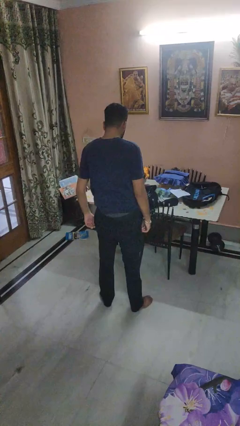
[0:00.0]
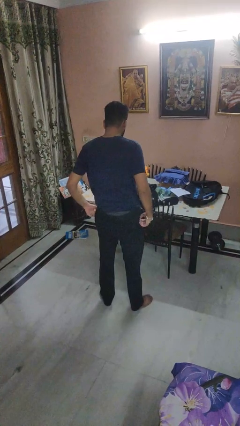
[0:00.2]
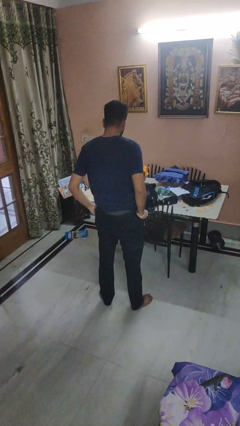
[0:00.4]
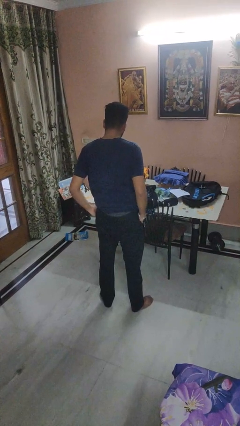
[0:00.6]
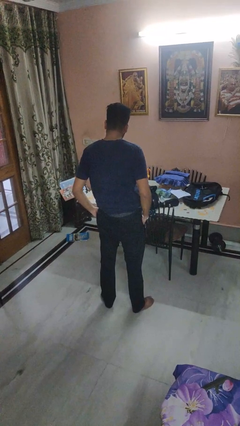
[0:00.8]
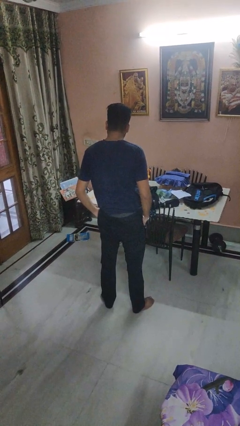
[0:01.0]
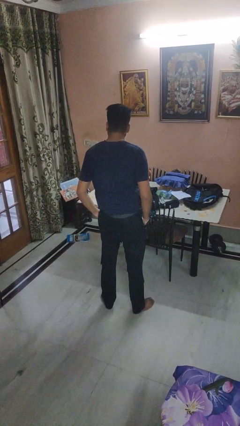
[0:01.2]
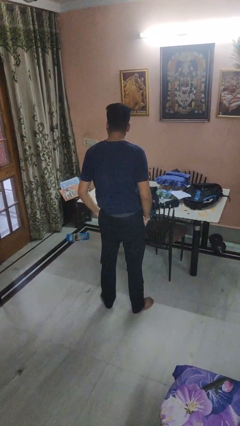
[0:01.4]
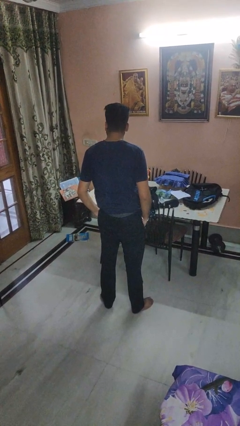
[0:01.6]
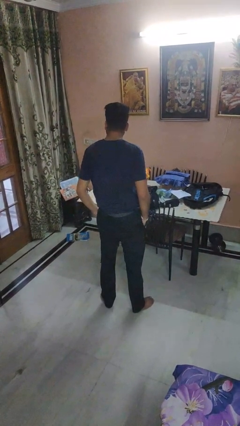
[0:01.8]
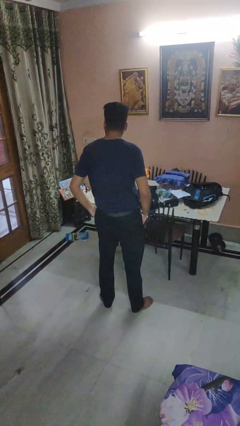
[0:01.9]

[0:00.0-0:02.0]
person puts hands in back pockets

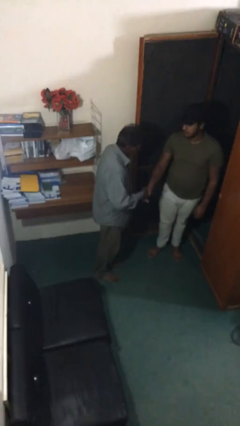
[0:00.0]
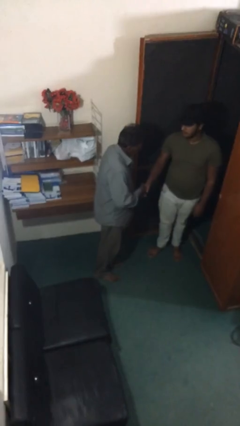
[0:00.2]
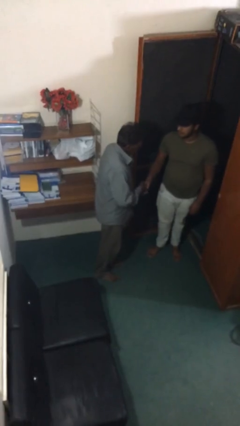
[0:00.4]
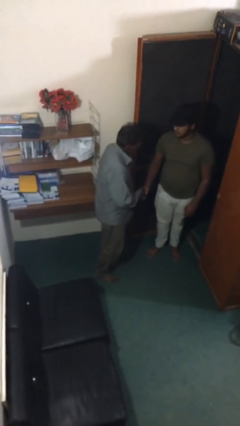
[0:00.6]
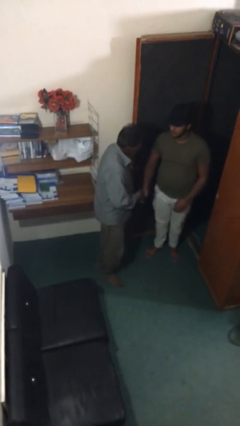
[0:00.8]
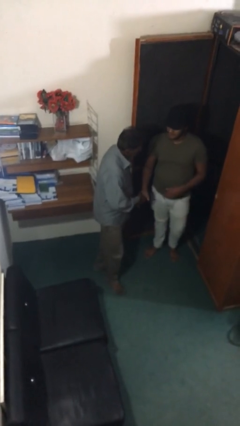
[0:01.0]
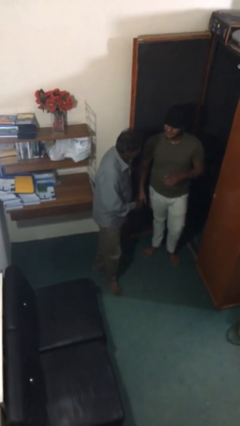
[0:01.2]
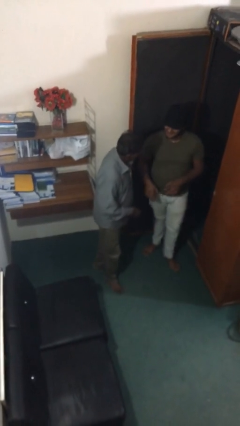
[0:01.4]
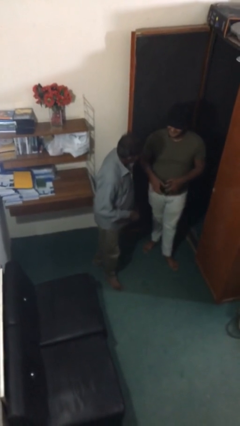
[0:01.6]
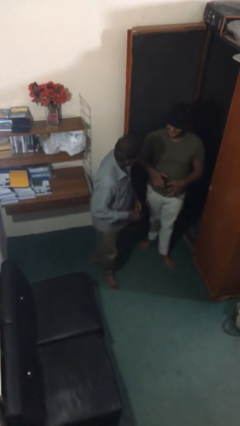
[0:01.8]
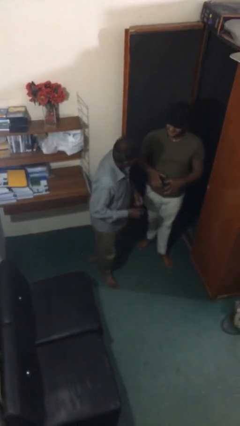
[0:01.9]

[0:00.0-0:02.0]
person shakes hand

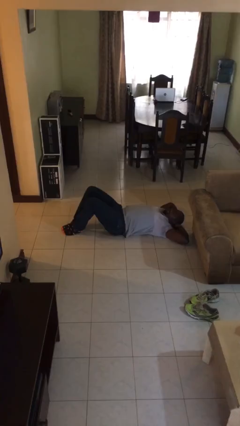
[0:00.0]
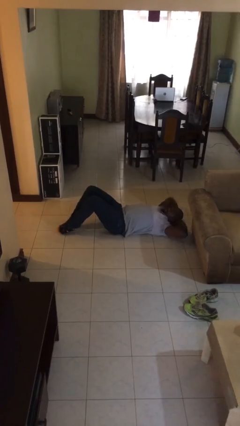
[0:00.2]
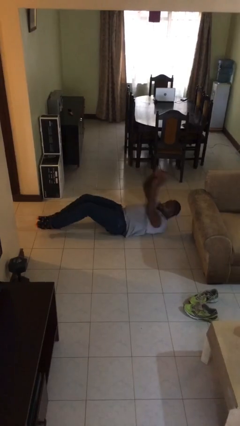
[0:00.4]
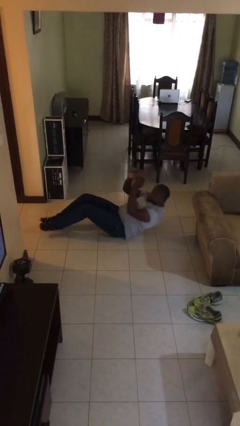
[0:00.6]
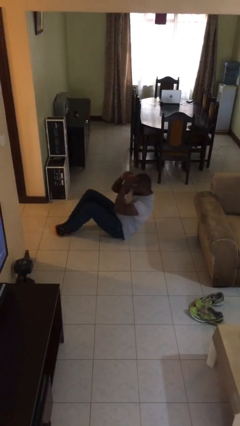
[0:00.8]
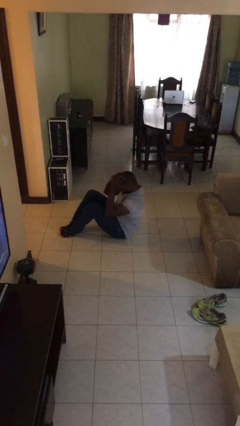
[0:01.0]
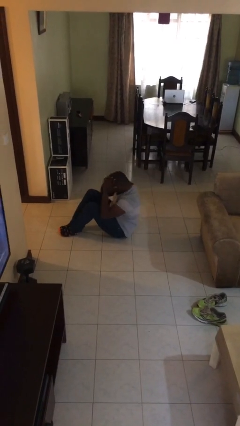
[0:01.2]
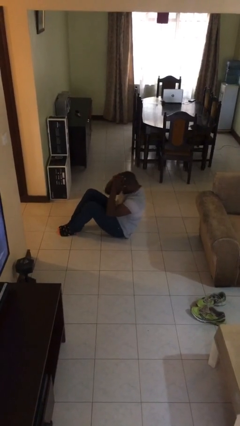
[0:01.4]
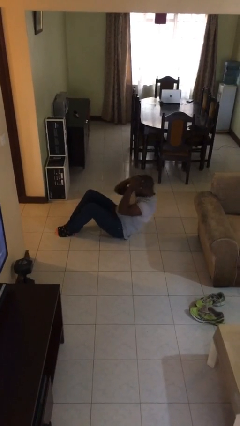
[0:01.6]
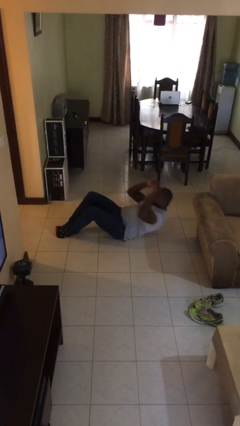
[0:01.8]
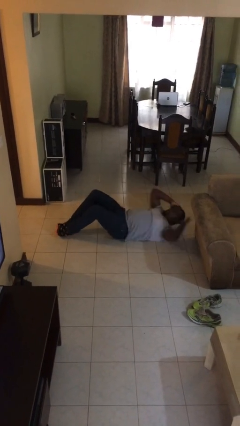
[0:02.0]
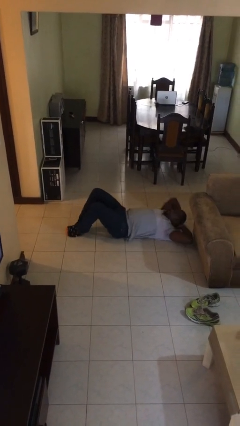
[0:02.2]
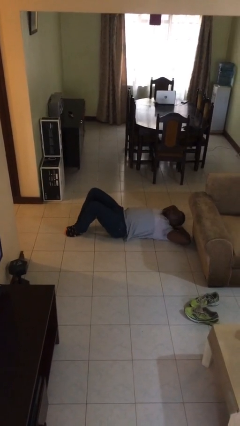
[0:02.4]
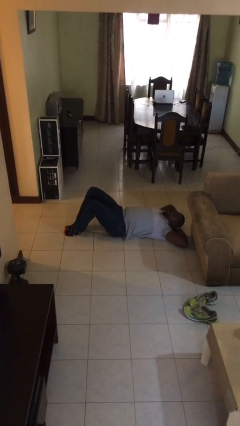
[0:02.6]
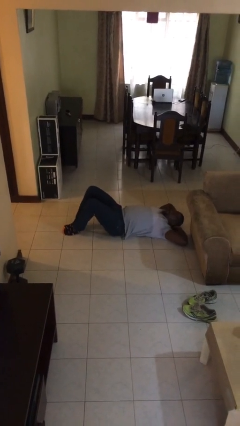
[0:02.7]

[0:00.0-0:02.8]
person exercises with situp

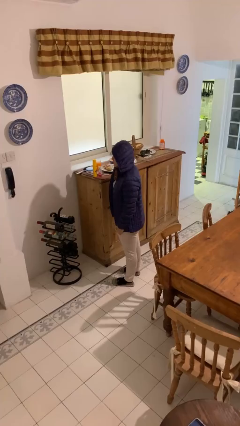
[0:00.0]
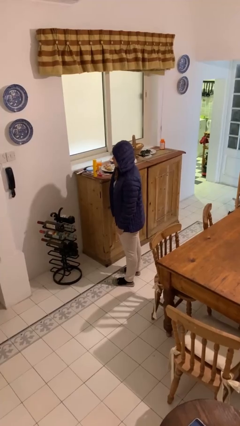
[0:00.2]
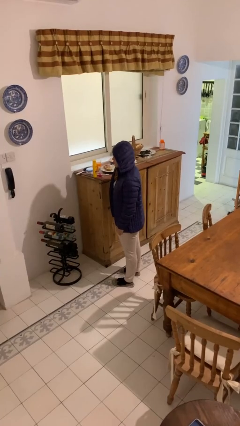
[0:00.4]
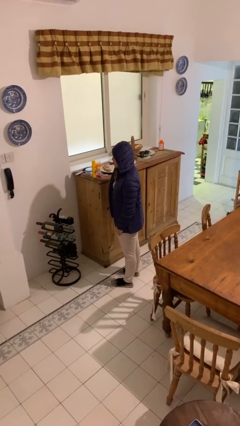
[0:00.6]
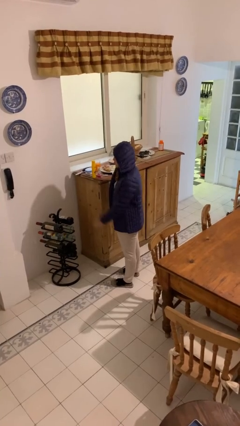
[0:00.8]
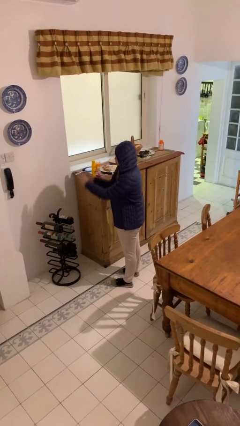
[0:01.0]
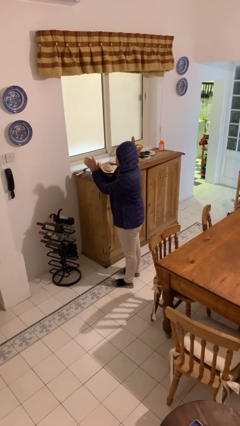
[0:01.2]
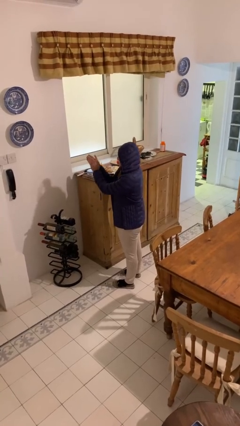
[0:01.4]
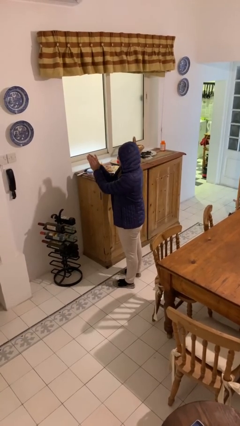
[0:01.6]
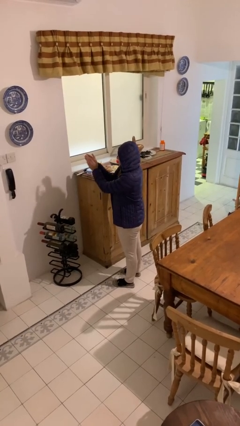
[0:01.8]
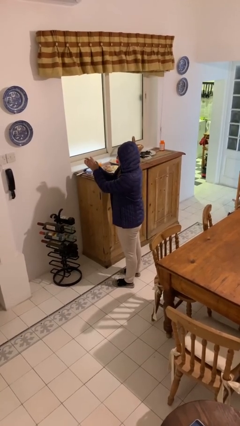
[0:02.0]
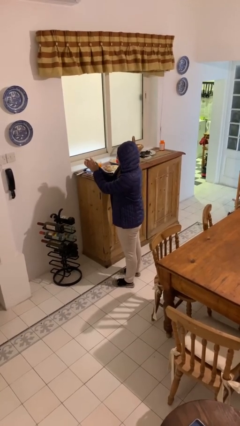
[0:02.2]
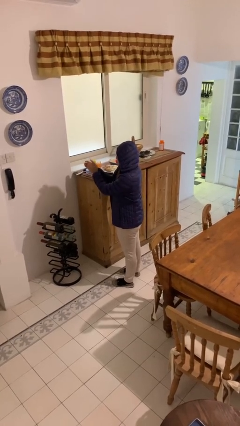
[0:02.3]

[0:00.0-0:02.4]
person claps hands

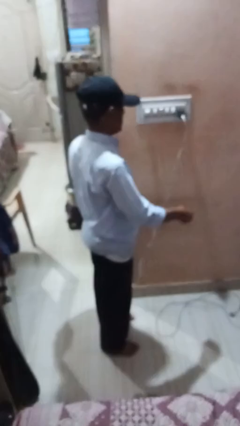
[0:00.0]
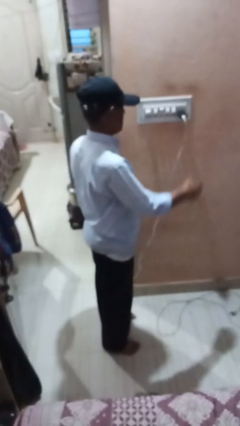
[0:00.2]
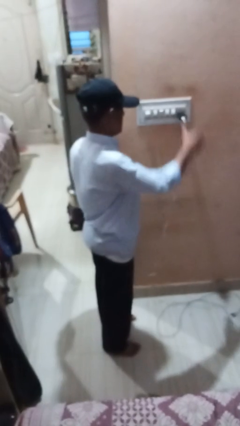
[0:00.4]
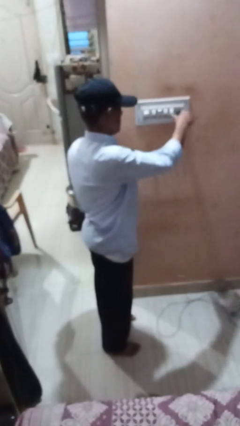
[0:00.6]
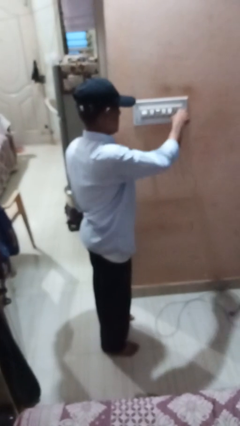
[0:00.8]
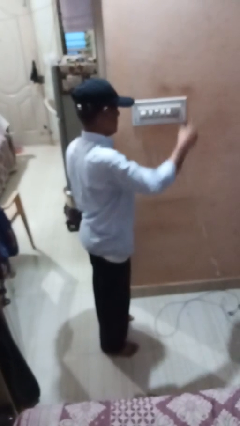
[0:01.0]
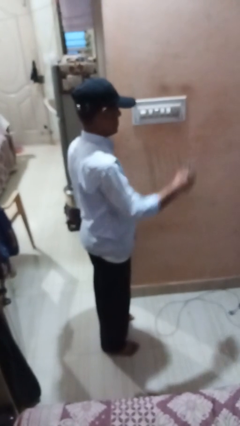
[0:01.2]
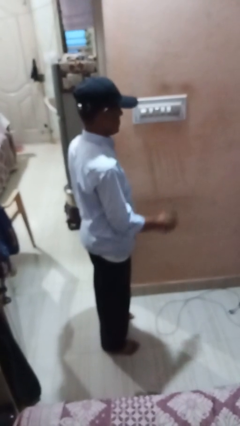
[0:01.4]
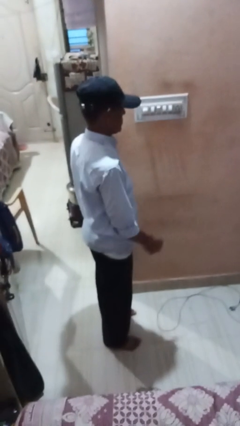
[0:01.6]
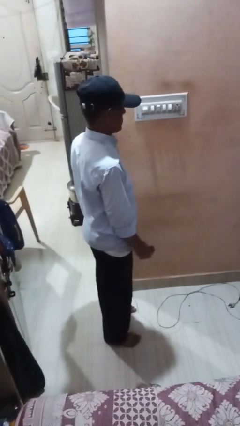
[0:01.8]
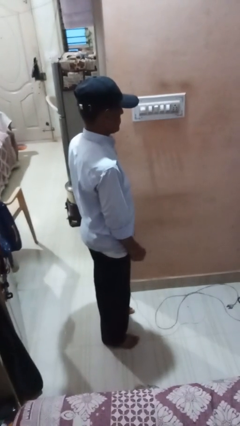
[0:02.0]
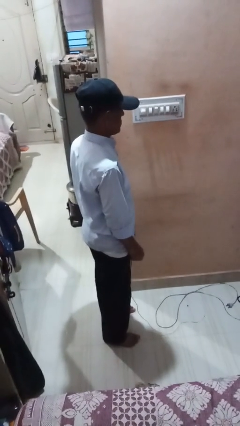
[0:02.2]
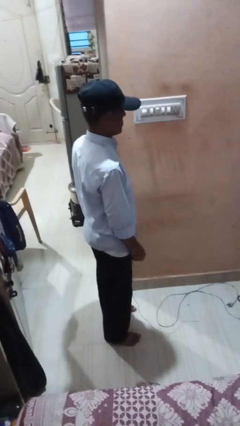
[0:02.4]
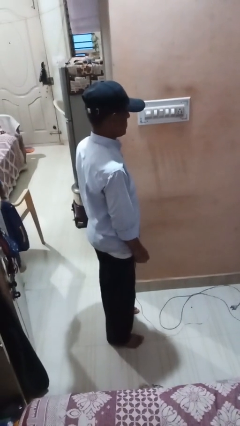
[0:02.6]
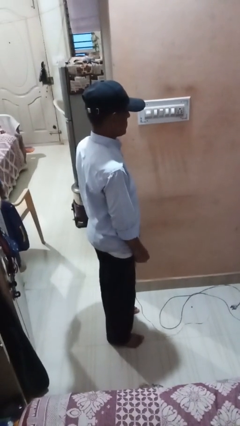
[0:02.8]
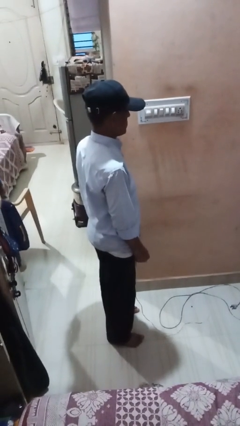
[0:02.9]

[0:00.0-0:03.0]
person unplugs from electrical socket

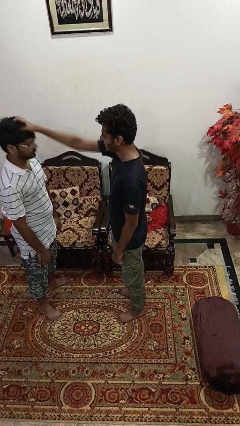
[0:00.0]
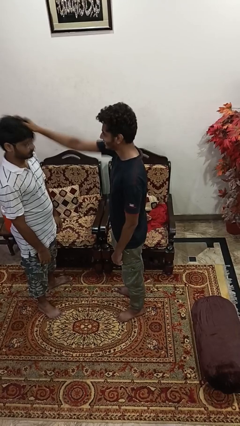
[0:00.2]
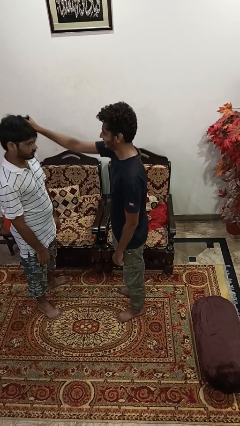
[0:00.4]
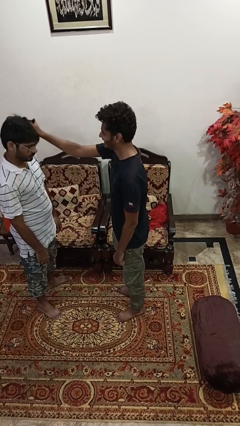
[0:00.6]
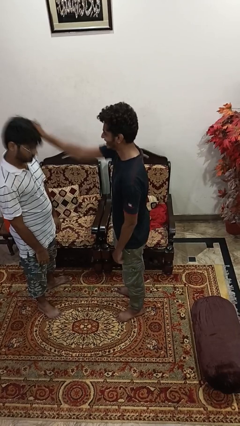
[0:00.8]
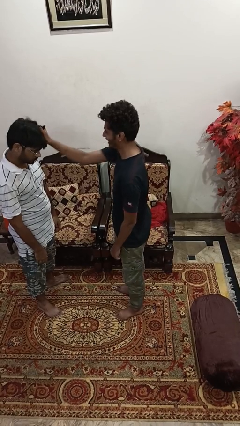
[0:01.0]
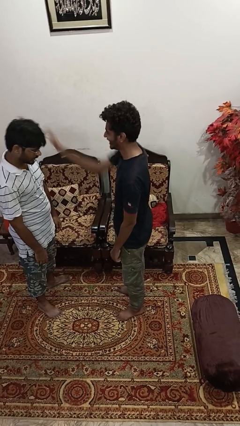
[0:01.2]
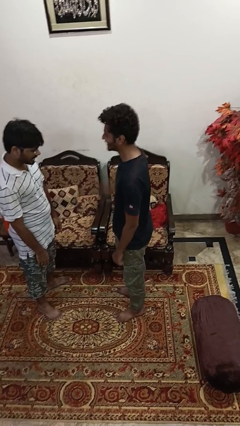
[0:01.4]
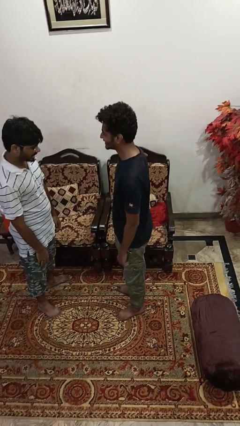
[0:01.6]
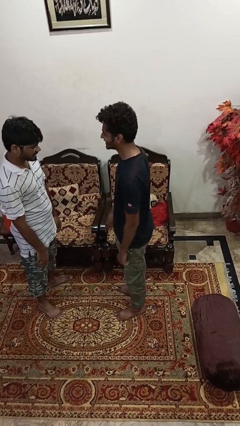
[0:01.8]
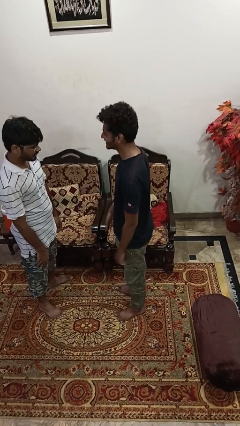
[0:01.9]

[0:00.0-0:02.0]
person grabs person by shoulder

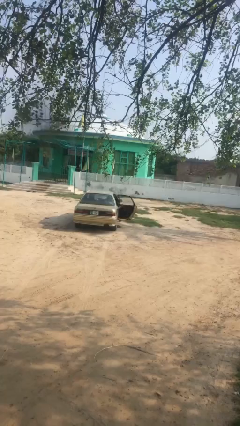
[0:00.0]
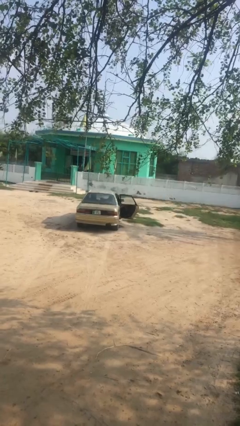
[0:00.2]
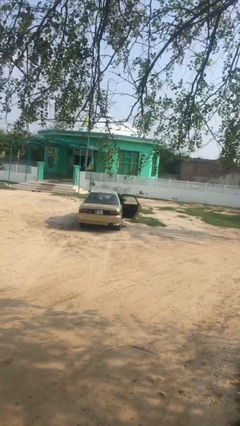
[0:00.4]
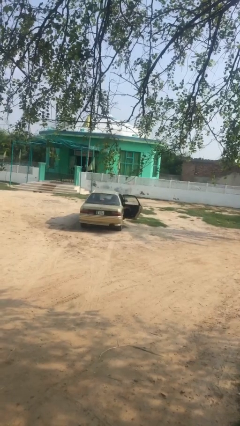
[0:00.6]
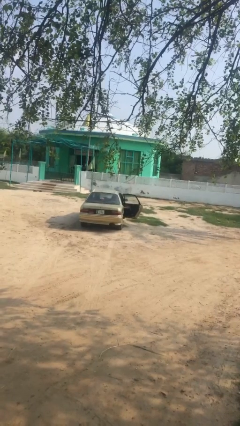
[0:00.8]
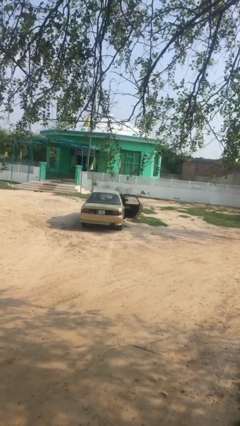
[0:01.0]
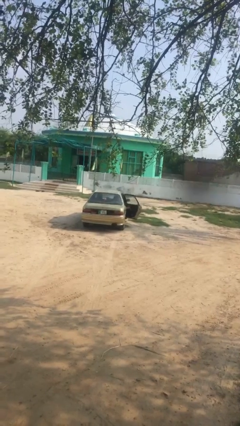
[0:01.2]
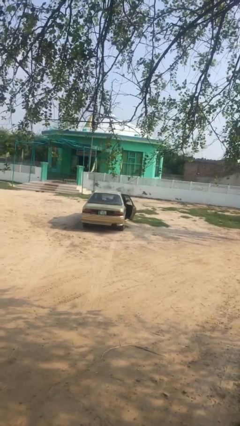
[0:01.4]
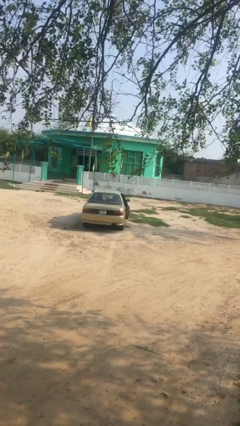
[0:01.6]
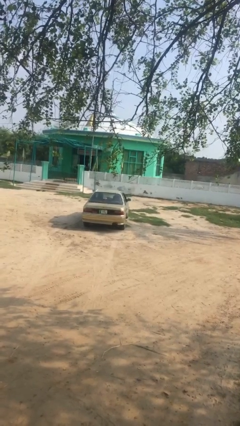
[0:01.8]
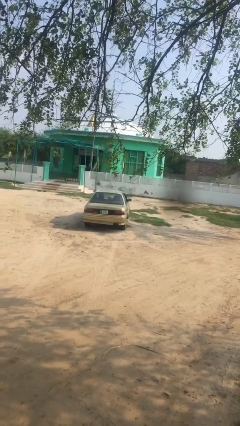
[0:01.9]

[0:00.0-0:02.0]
person closes car door

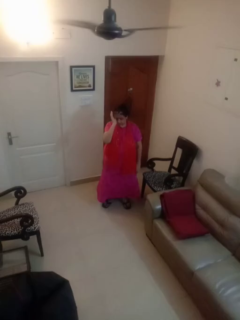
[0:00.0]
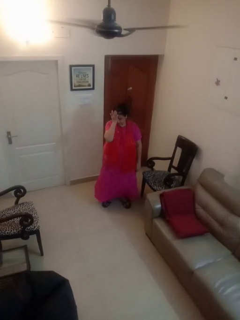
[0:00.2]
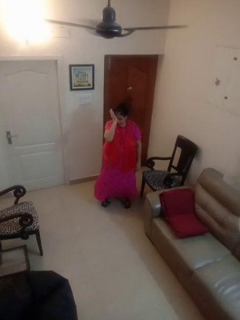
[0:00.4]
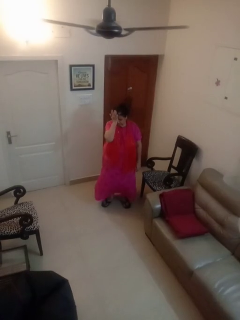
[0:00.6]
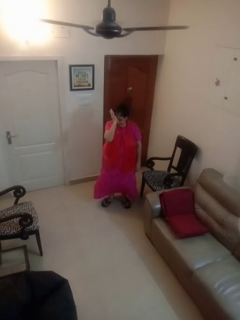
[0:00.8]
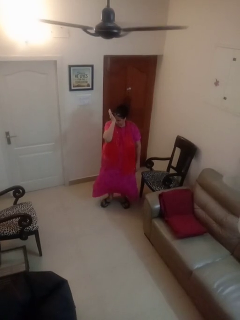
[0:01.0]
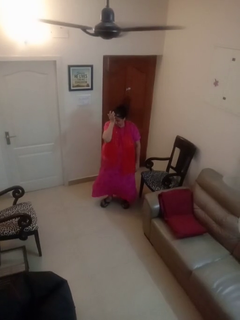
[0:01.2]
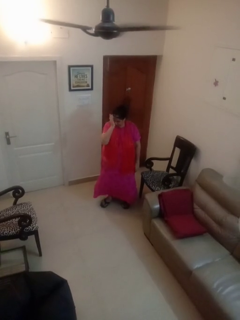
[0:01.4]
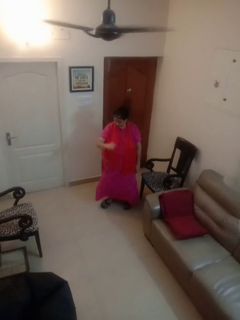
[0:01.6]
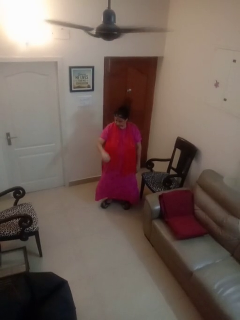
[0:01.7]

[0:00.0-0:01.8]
person rubs eyes
